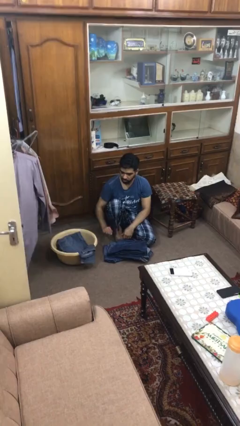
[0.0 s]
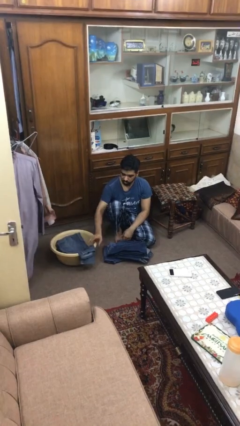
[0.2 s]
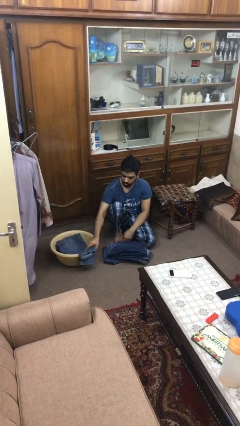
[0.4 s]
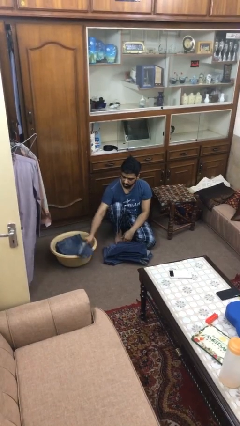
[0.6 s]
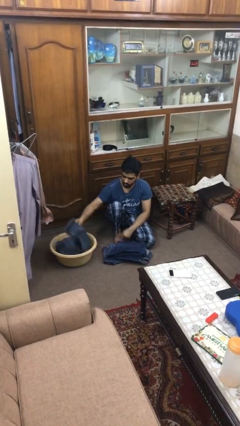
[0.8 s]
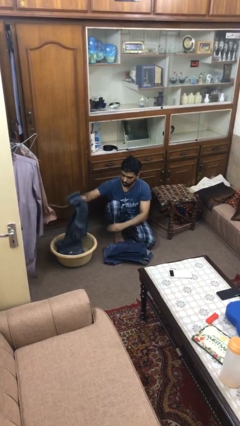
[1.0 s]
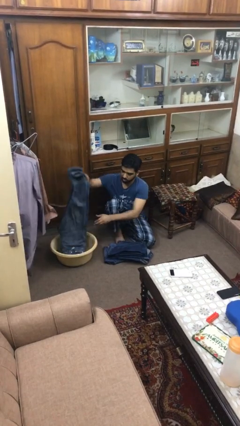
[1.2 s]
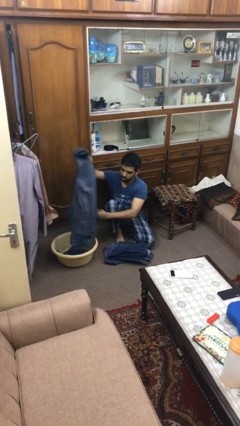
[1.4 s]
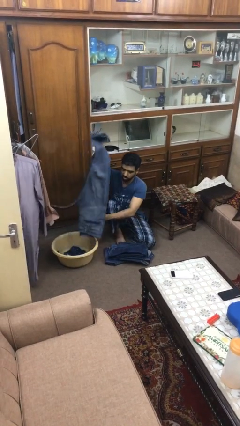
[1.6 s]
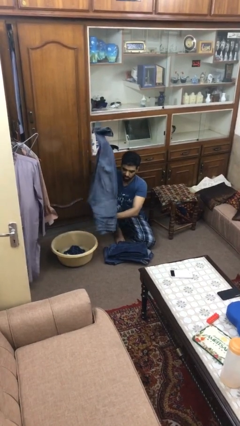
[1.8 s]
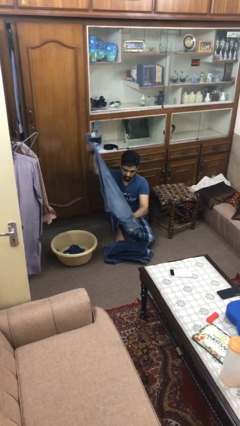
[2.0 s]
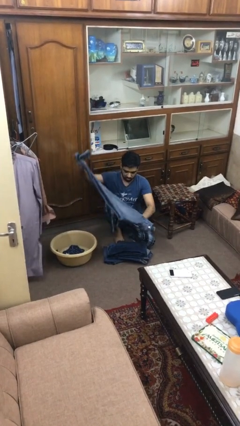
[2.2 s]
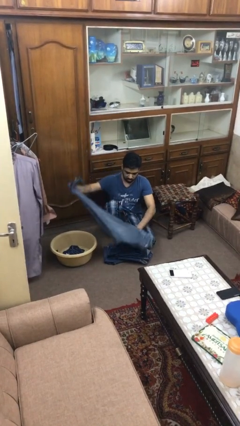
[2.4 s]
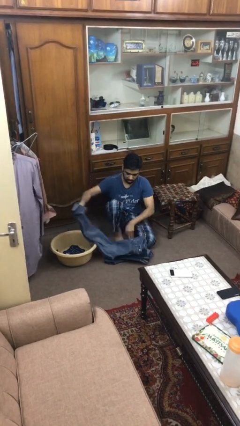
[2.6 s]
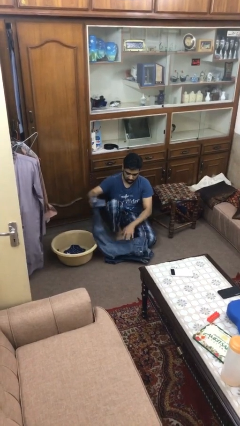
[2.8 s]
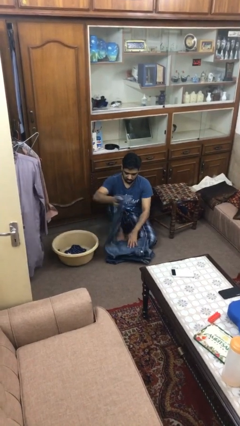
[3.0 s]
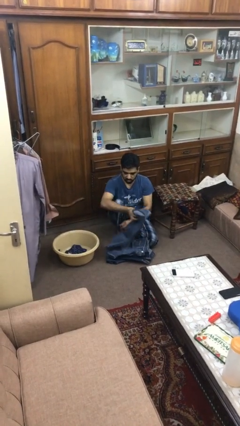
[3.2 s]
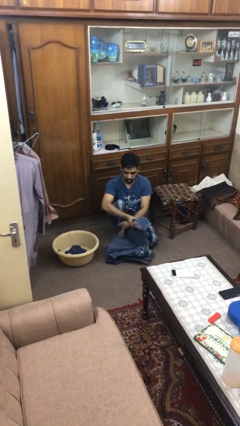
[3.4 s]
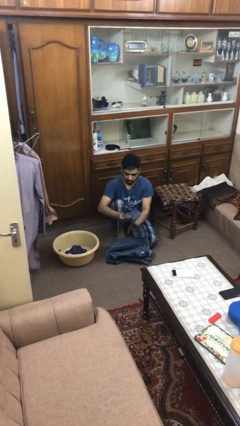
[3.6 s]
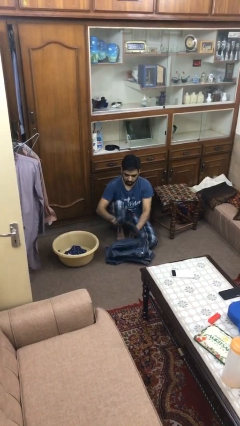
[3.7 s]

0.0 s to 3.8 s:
person folds pants

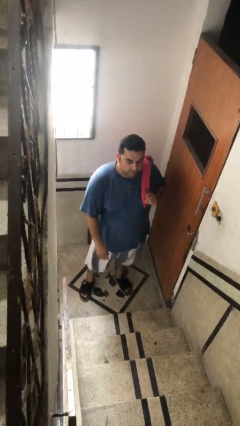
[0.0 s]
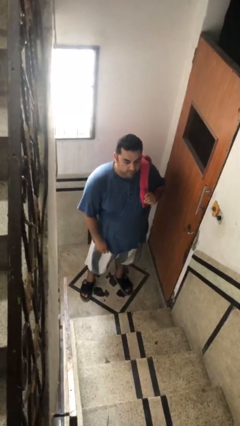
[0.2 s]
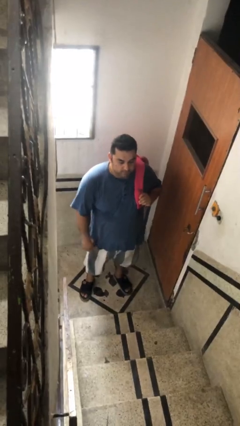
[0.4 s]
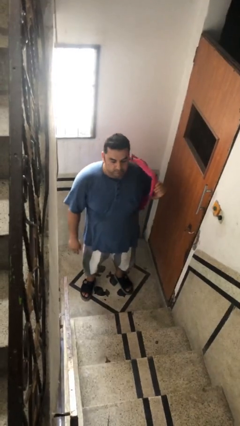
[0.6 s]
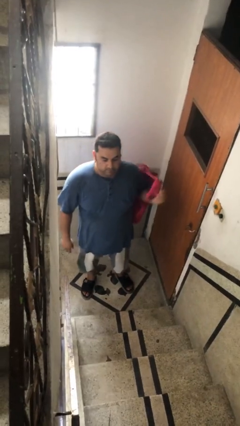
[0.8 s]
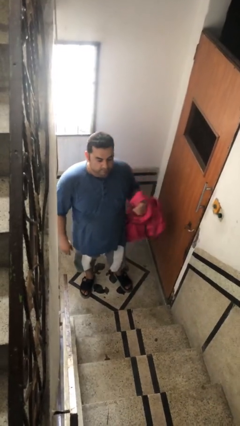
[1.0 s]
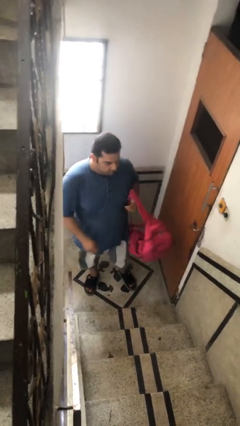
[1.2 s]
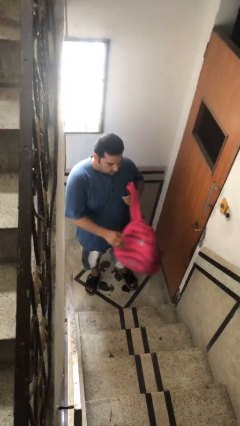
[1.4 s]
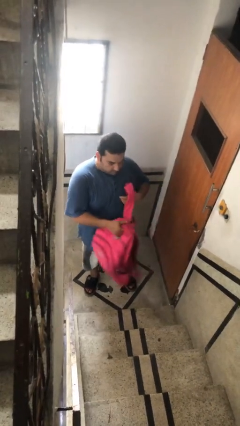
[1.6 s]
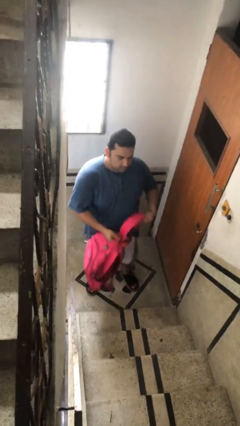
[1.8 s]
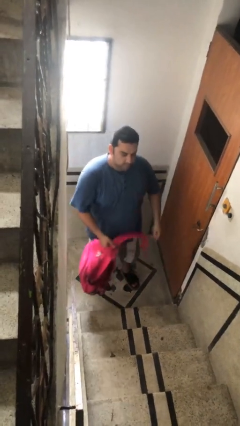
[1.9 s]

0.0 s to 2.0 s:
person takes off backpack

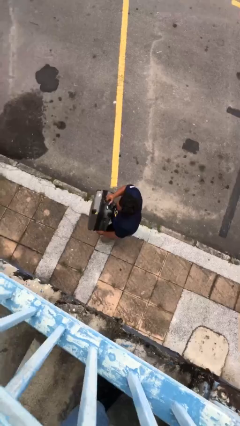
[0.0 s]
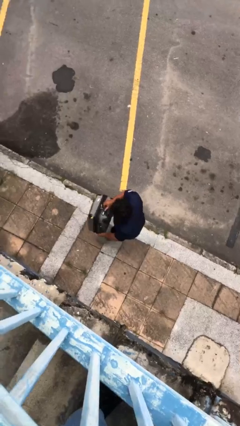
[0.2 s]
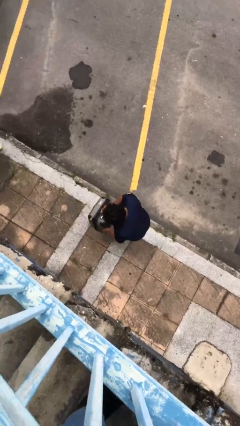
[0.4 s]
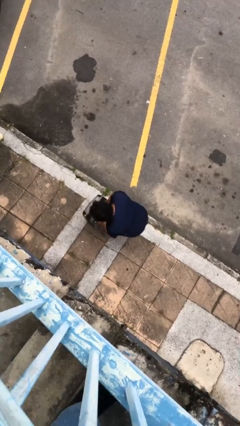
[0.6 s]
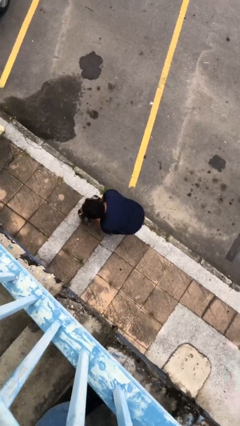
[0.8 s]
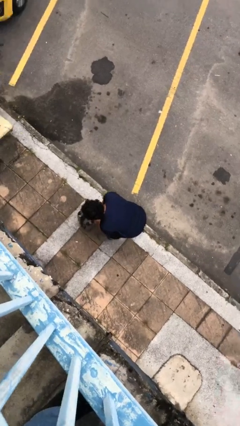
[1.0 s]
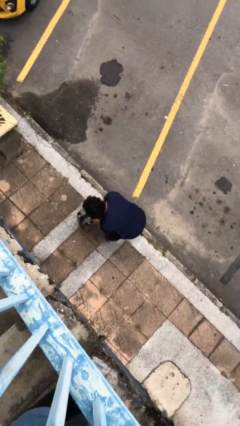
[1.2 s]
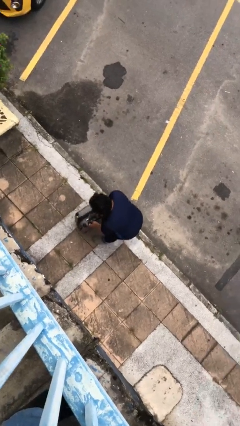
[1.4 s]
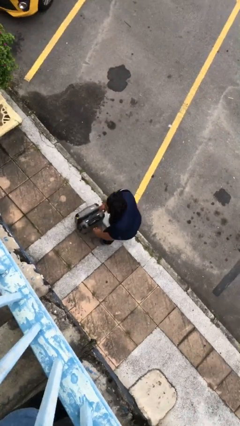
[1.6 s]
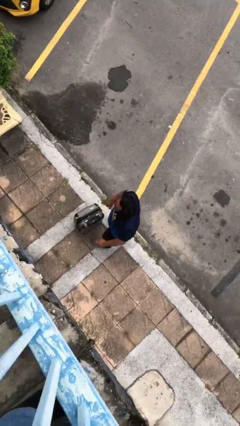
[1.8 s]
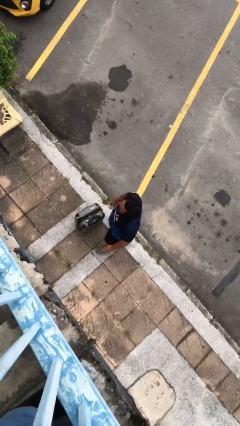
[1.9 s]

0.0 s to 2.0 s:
person puts down object on floor

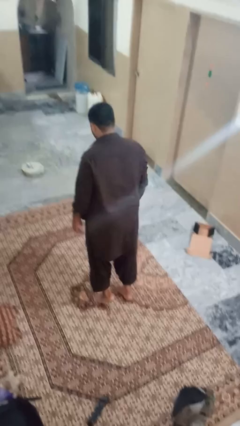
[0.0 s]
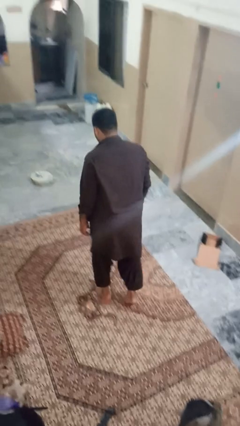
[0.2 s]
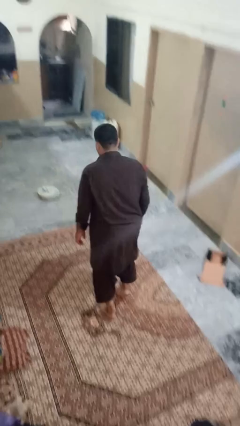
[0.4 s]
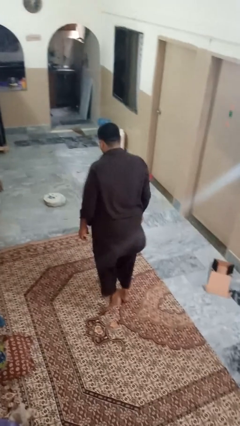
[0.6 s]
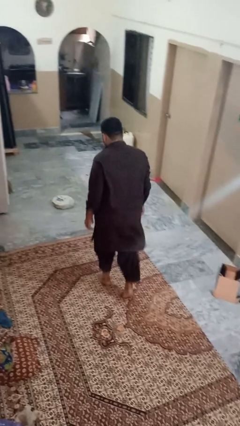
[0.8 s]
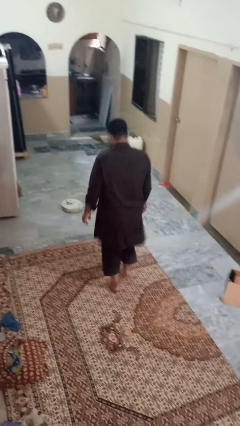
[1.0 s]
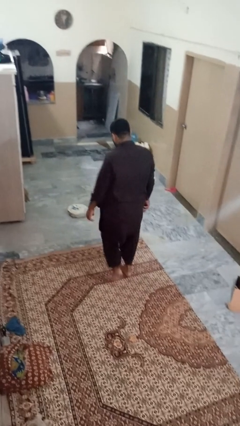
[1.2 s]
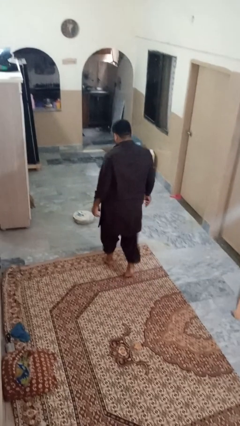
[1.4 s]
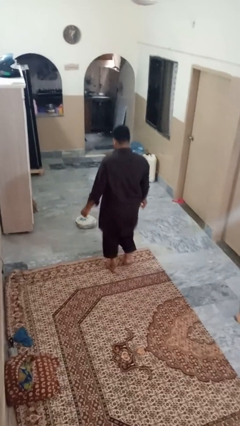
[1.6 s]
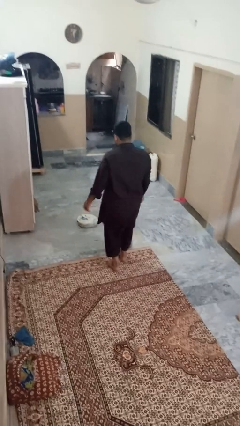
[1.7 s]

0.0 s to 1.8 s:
person walks tiptoe

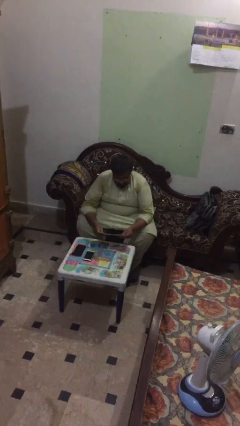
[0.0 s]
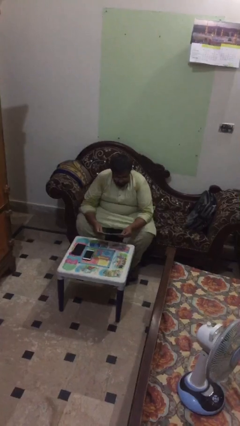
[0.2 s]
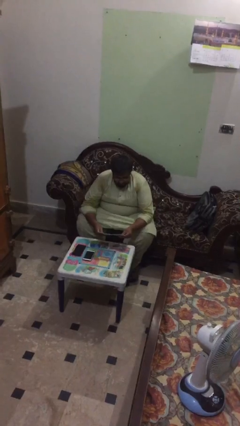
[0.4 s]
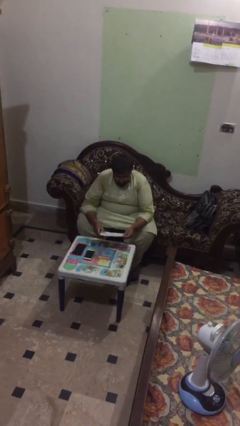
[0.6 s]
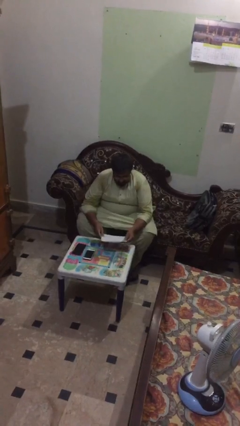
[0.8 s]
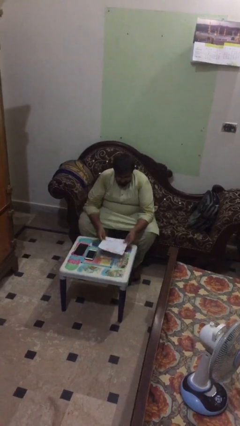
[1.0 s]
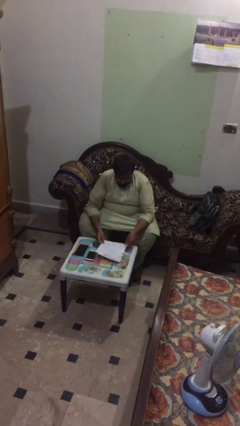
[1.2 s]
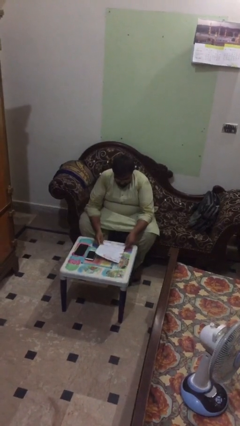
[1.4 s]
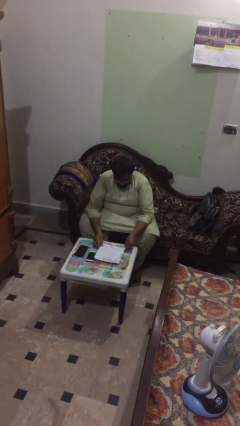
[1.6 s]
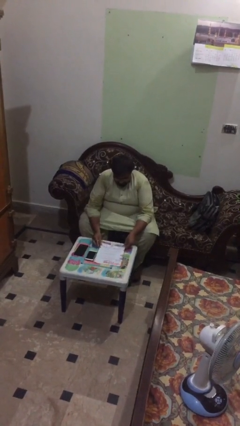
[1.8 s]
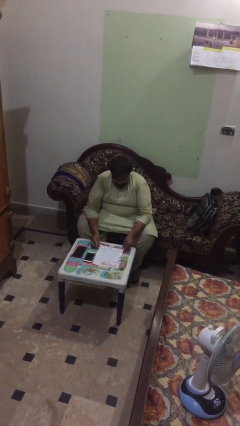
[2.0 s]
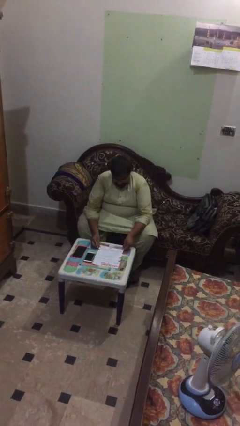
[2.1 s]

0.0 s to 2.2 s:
person puts down object on table

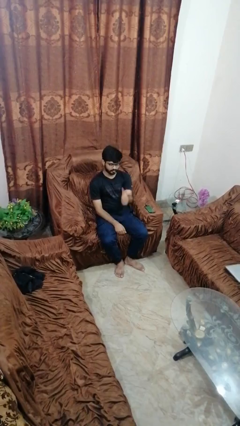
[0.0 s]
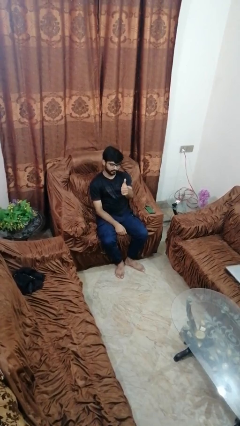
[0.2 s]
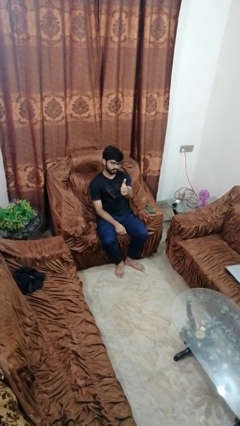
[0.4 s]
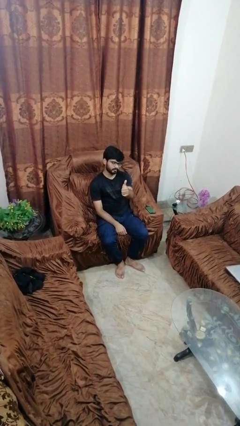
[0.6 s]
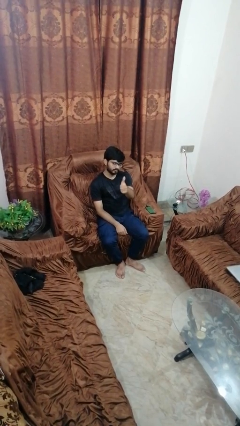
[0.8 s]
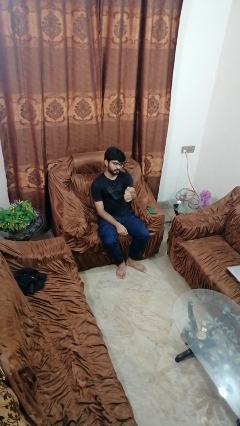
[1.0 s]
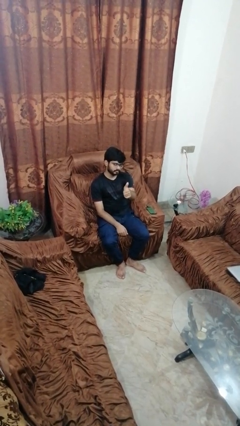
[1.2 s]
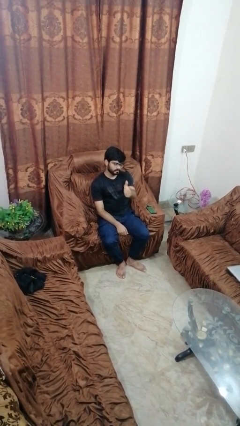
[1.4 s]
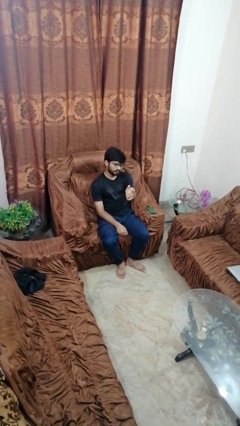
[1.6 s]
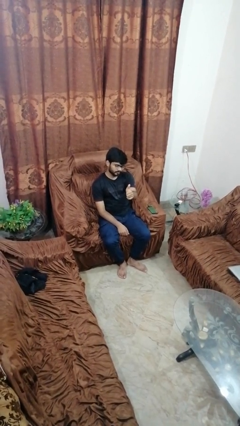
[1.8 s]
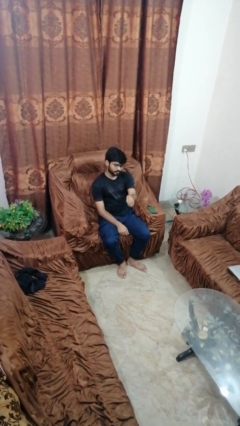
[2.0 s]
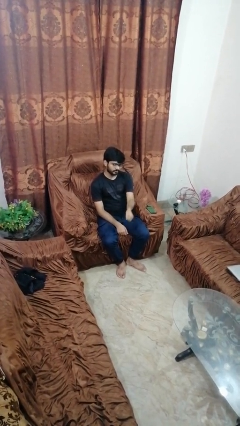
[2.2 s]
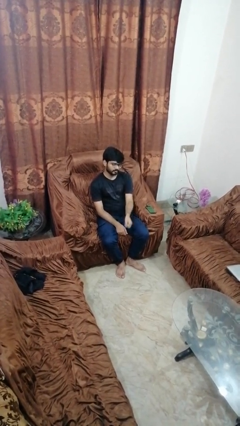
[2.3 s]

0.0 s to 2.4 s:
person gestures thumbs up

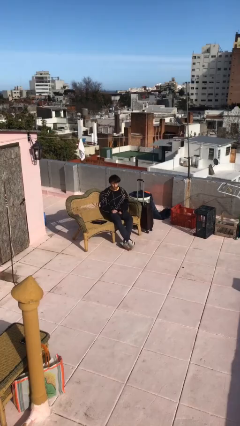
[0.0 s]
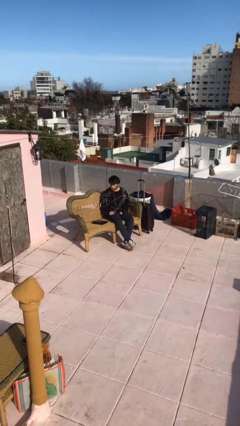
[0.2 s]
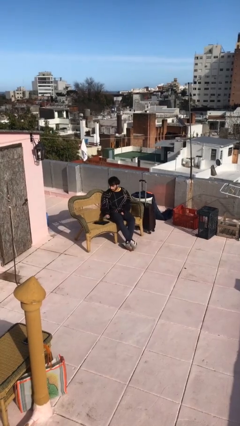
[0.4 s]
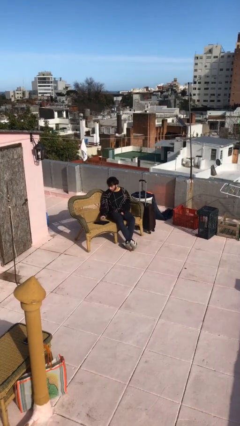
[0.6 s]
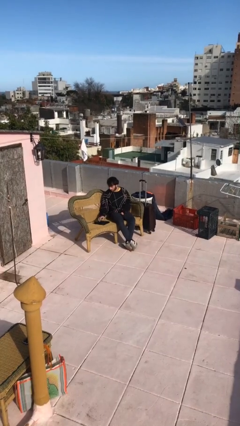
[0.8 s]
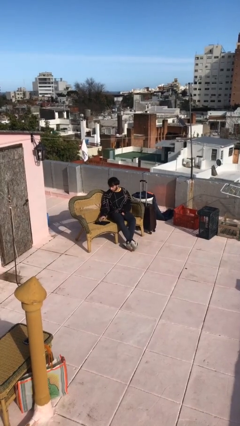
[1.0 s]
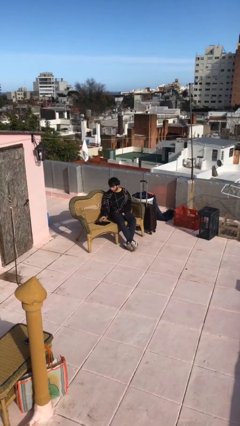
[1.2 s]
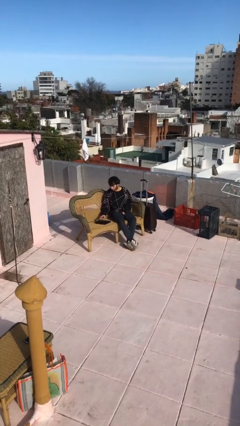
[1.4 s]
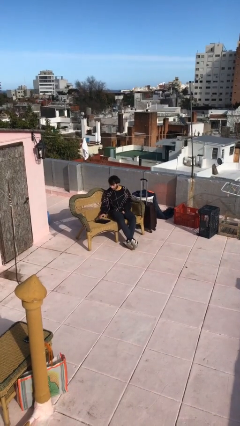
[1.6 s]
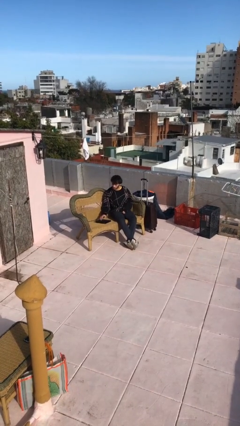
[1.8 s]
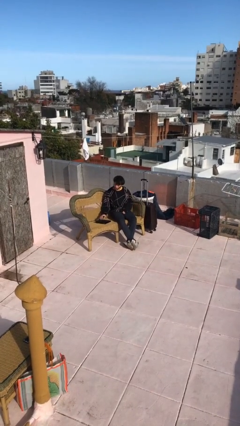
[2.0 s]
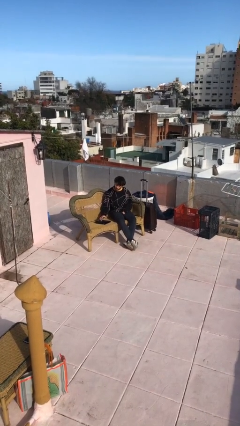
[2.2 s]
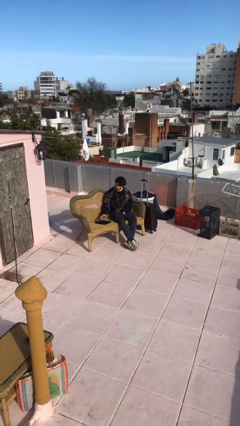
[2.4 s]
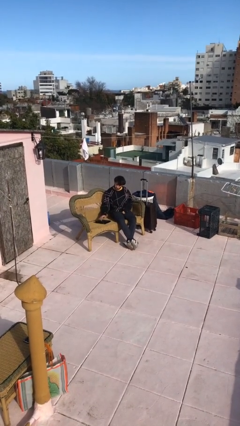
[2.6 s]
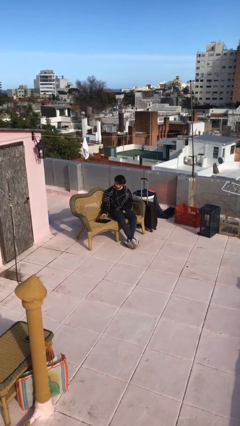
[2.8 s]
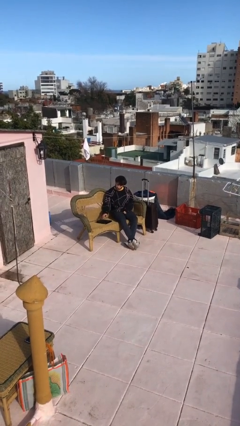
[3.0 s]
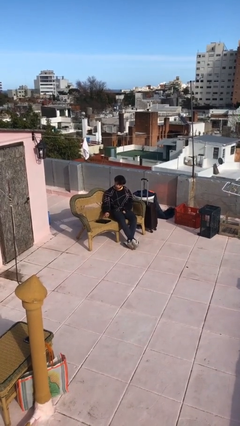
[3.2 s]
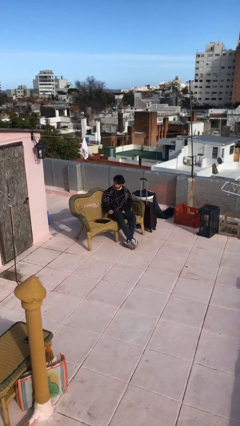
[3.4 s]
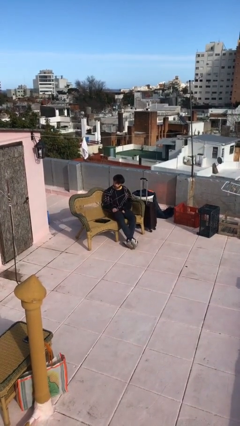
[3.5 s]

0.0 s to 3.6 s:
person taps object with finger
